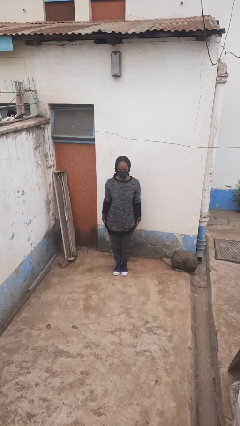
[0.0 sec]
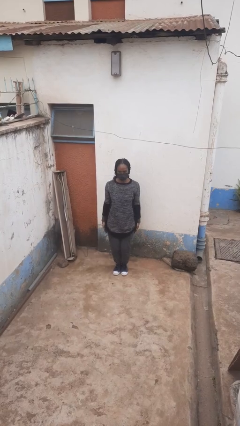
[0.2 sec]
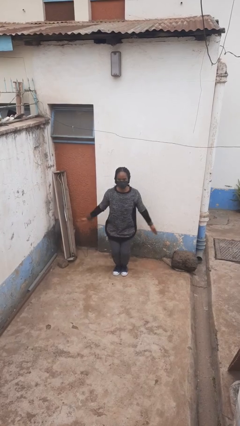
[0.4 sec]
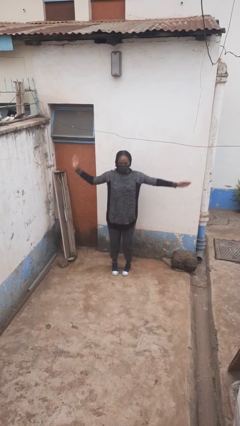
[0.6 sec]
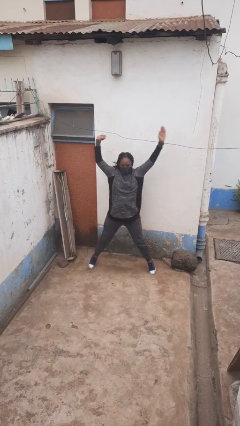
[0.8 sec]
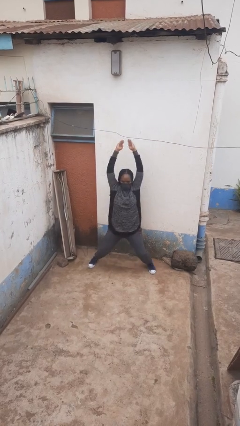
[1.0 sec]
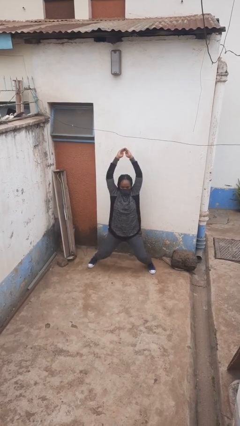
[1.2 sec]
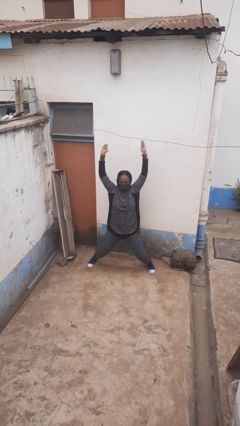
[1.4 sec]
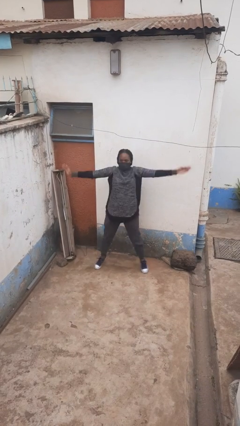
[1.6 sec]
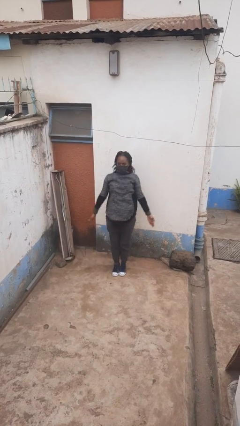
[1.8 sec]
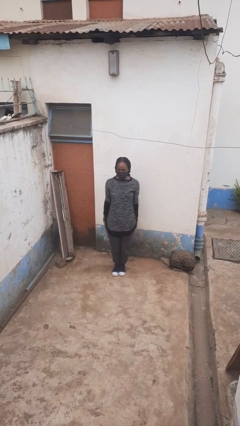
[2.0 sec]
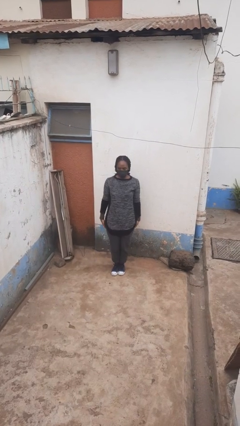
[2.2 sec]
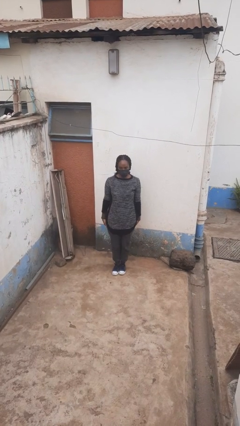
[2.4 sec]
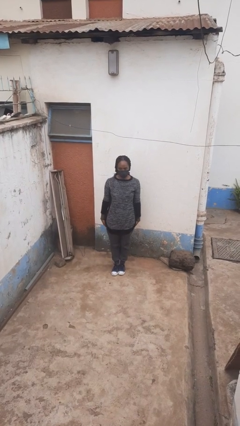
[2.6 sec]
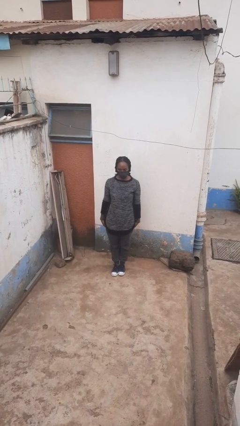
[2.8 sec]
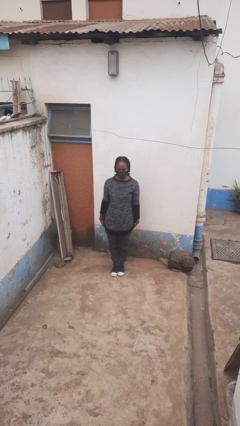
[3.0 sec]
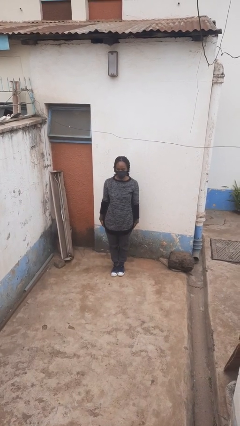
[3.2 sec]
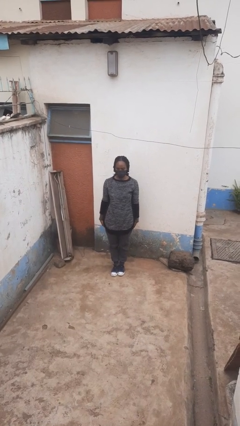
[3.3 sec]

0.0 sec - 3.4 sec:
person exercises with jumping jacks

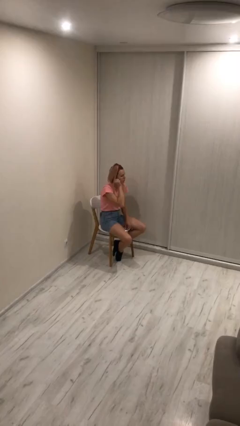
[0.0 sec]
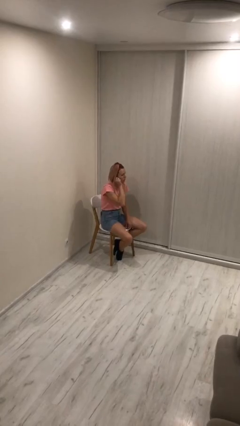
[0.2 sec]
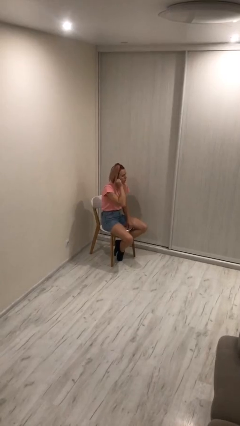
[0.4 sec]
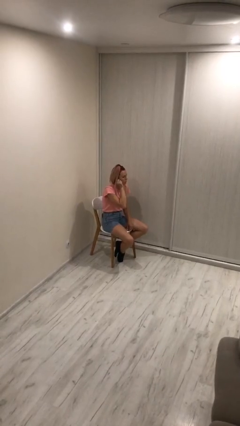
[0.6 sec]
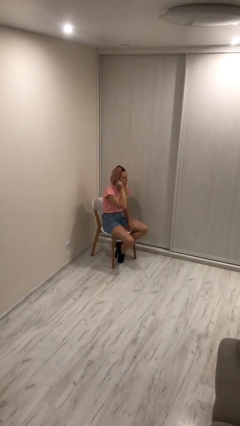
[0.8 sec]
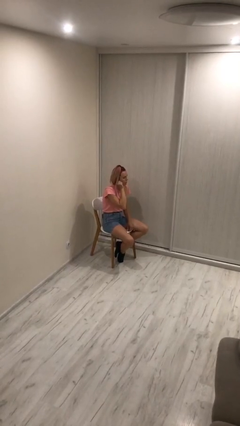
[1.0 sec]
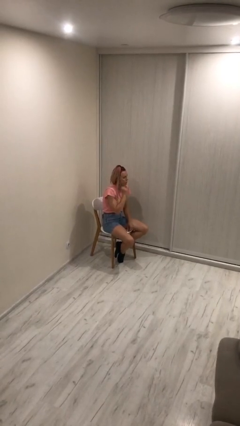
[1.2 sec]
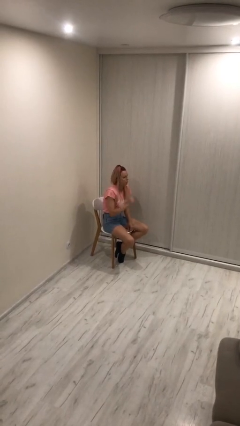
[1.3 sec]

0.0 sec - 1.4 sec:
person touches earlobe

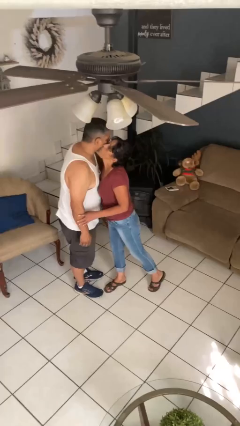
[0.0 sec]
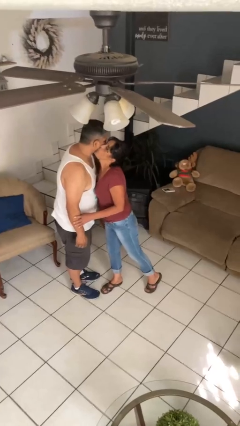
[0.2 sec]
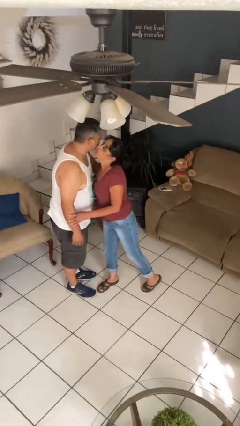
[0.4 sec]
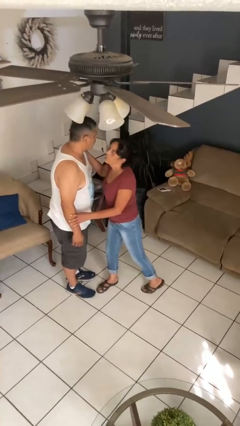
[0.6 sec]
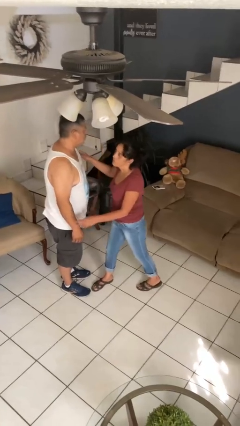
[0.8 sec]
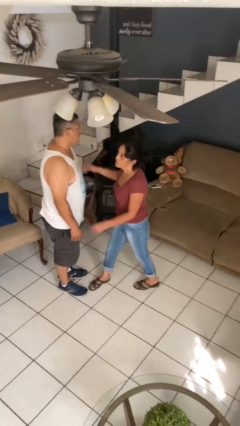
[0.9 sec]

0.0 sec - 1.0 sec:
person kisses cheek of person

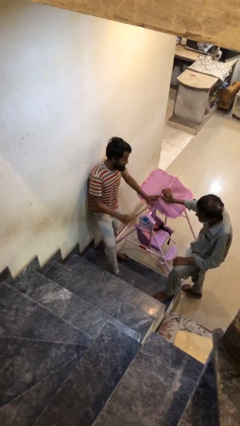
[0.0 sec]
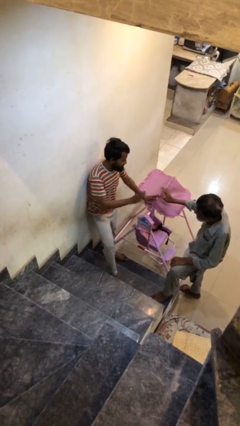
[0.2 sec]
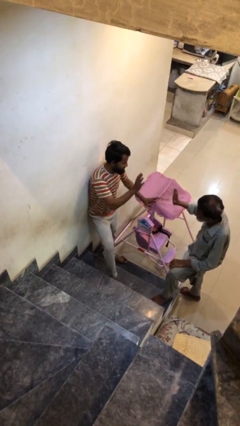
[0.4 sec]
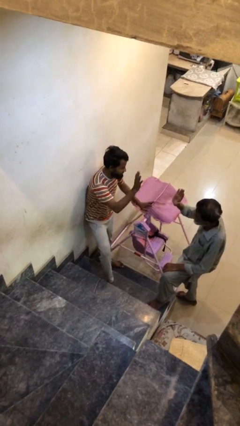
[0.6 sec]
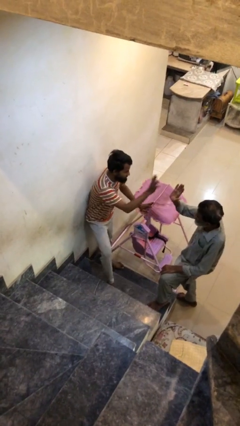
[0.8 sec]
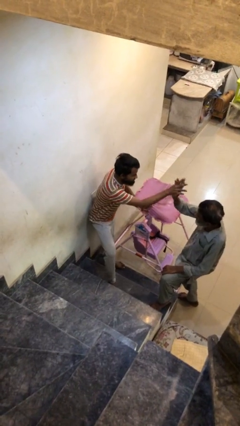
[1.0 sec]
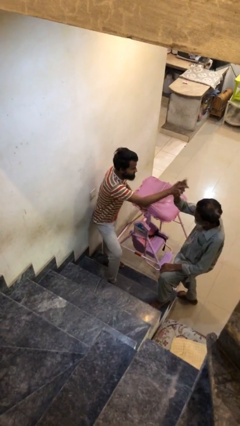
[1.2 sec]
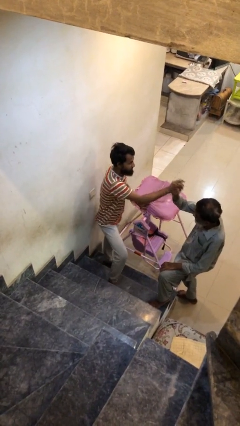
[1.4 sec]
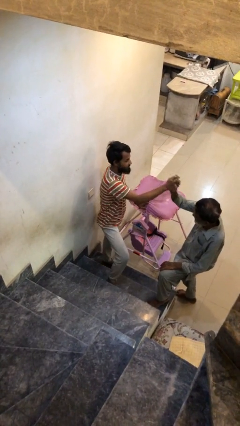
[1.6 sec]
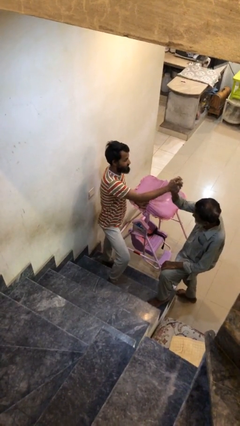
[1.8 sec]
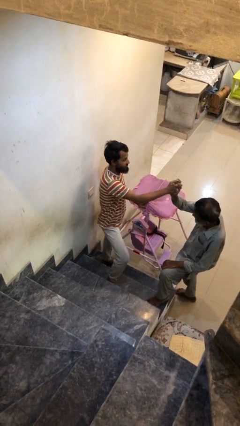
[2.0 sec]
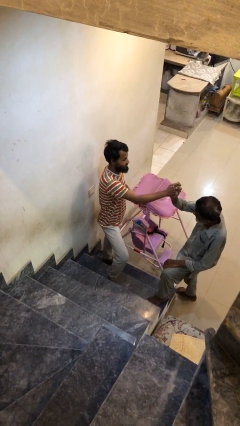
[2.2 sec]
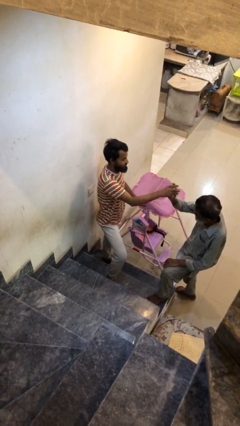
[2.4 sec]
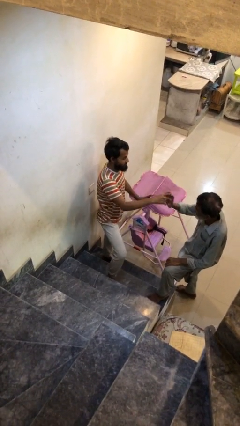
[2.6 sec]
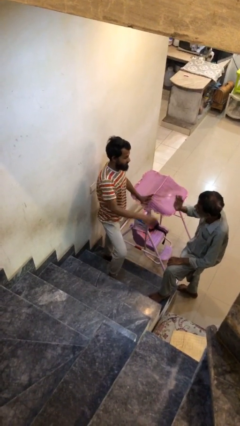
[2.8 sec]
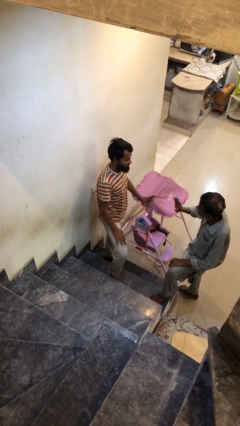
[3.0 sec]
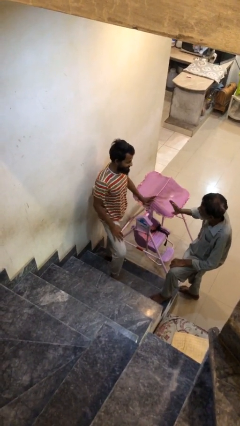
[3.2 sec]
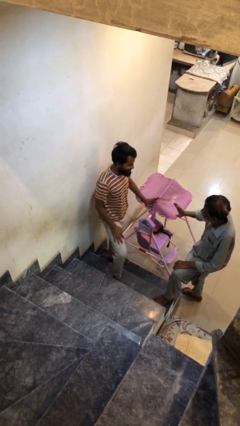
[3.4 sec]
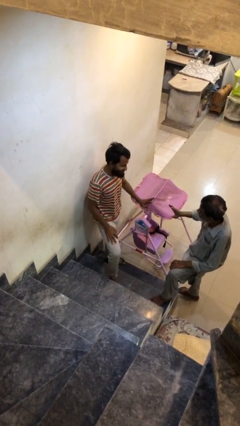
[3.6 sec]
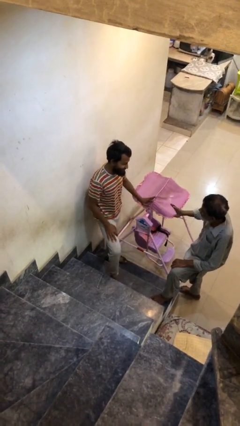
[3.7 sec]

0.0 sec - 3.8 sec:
person highfives hand

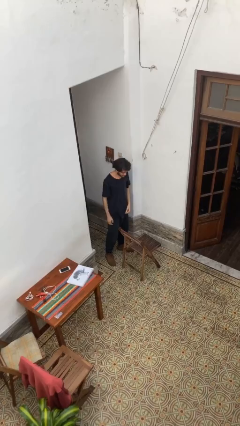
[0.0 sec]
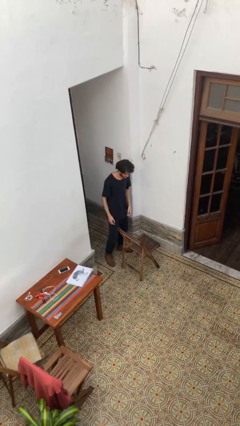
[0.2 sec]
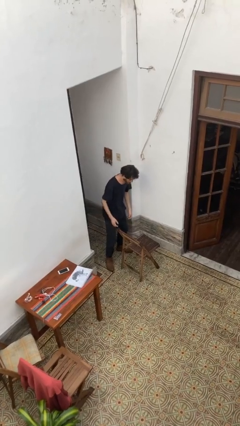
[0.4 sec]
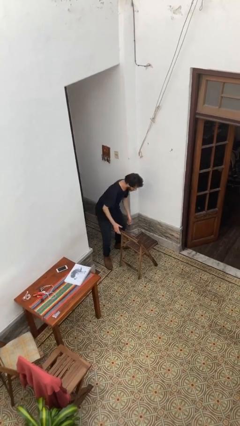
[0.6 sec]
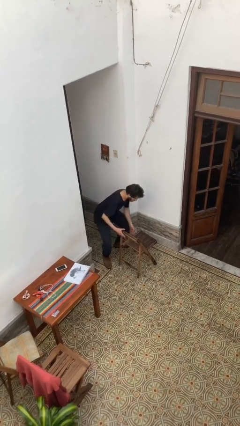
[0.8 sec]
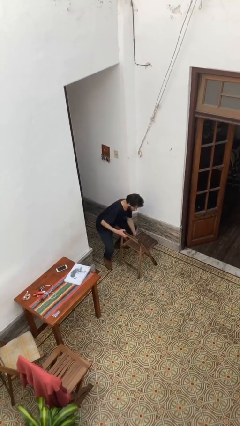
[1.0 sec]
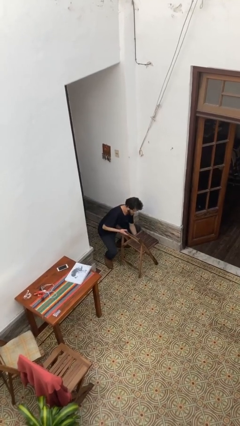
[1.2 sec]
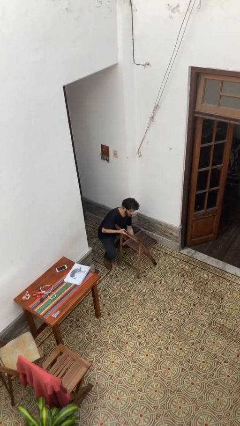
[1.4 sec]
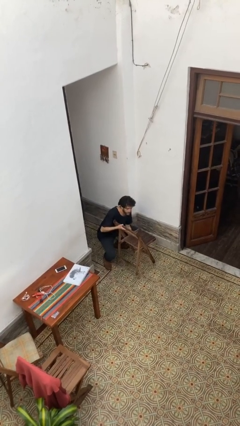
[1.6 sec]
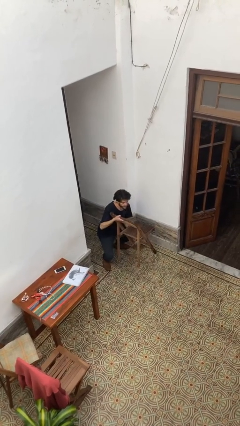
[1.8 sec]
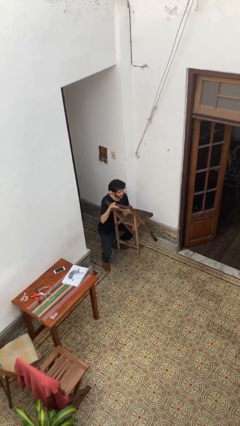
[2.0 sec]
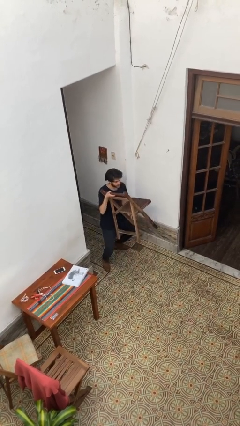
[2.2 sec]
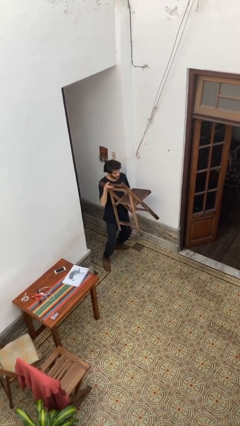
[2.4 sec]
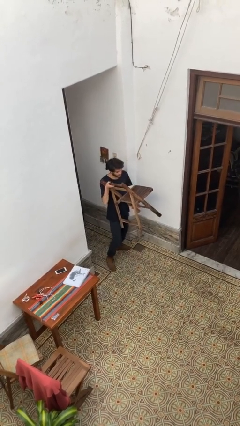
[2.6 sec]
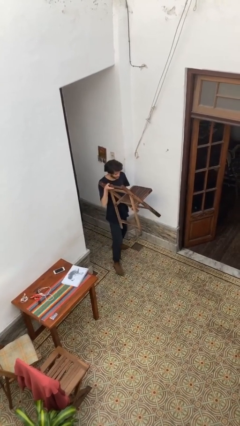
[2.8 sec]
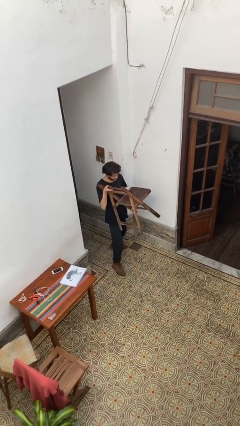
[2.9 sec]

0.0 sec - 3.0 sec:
person picks up object from floor

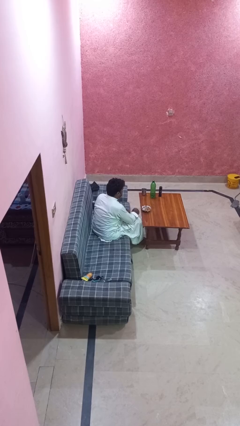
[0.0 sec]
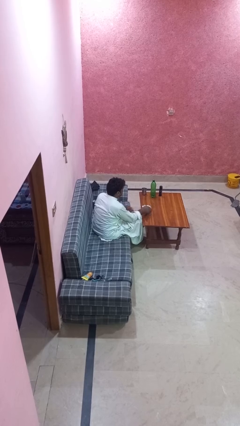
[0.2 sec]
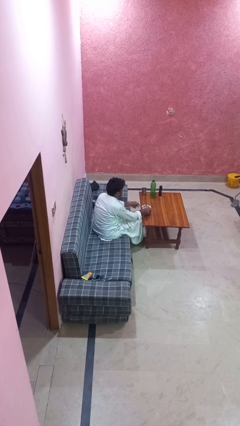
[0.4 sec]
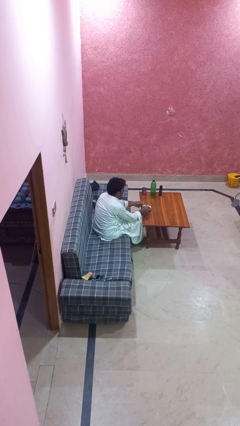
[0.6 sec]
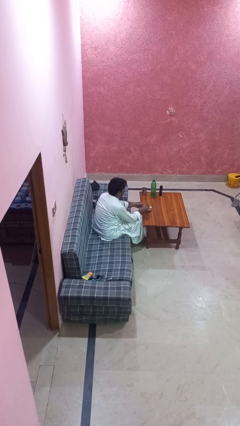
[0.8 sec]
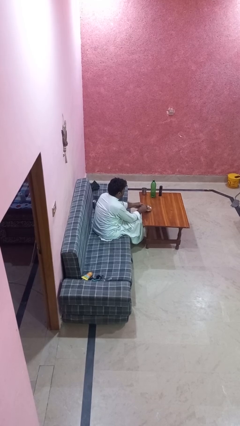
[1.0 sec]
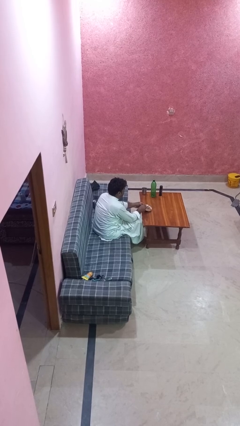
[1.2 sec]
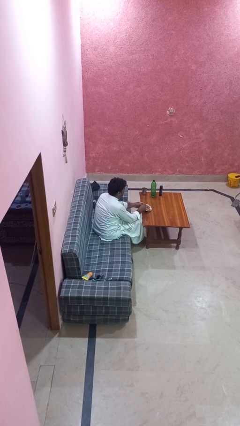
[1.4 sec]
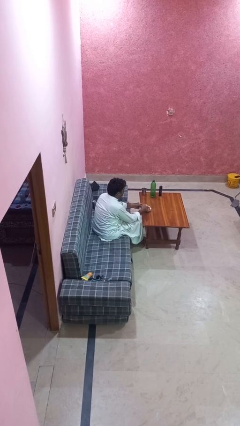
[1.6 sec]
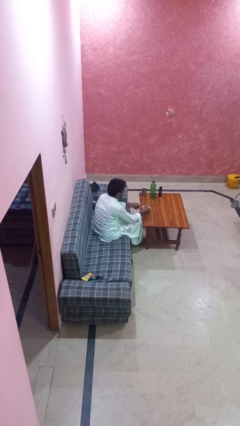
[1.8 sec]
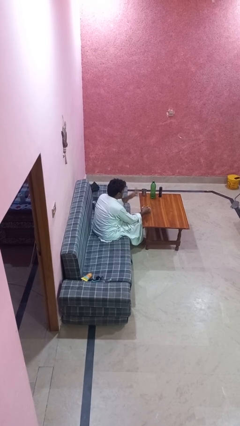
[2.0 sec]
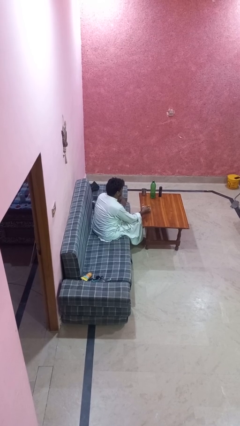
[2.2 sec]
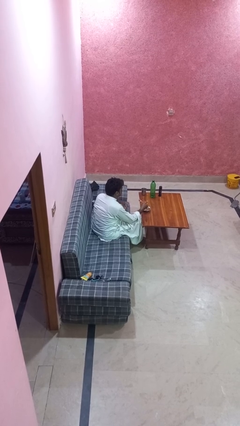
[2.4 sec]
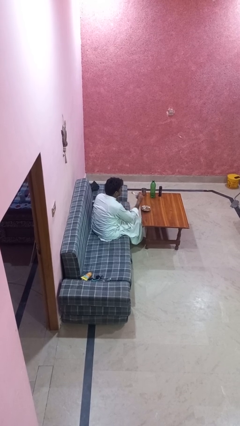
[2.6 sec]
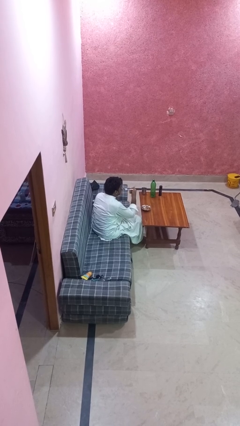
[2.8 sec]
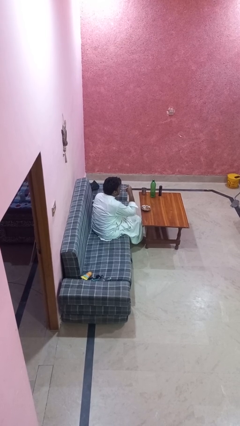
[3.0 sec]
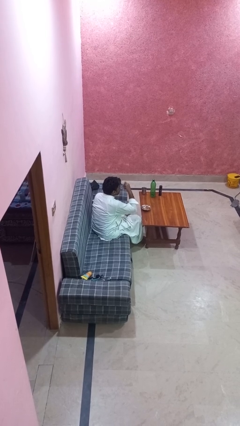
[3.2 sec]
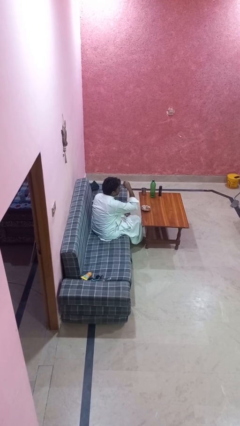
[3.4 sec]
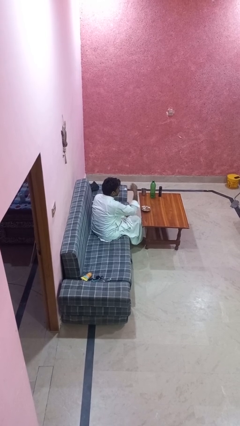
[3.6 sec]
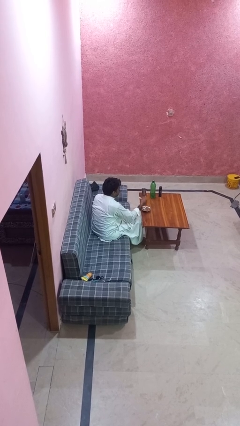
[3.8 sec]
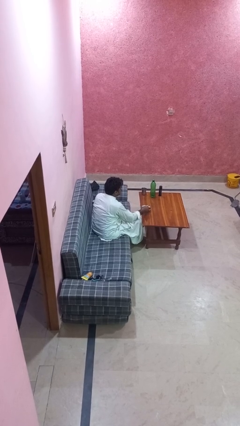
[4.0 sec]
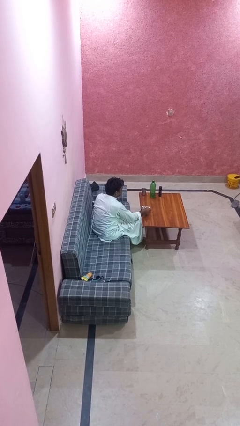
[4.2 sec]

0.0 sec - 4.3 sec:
person eats with utensil

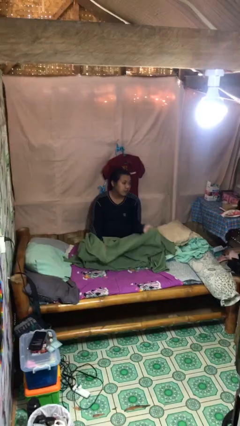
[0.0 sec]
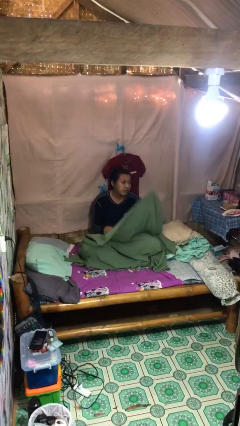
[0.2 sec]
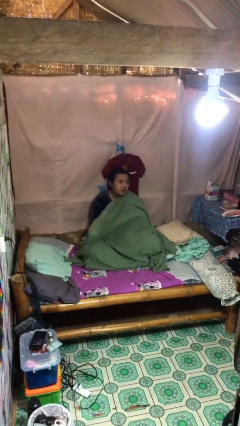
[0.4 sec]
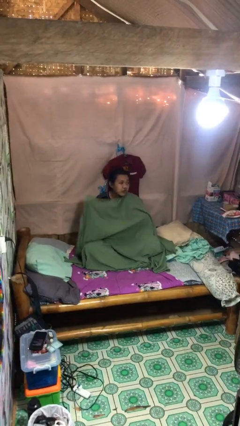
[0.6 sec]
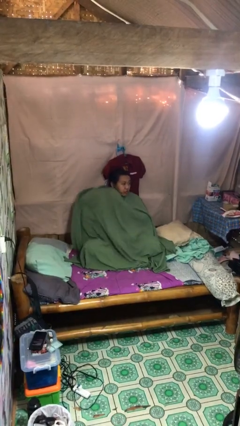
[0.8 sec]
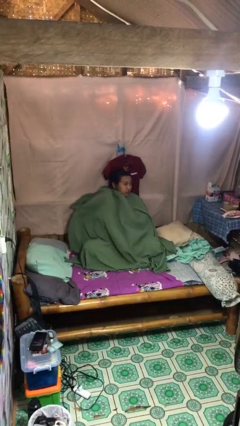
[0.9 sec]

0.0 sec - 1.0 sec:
person covers with blanket
